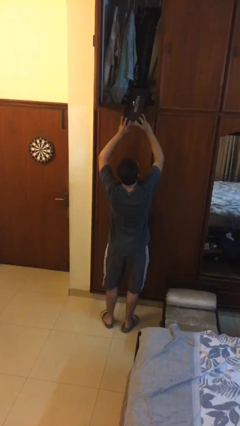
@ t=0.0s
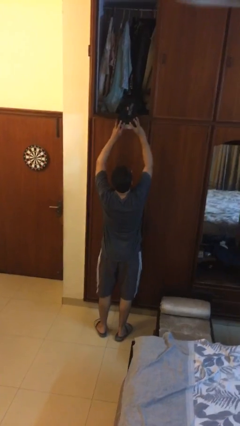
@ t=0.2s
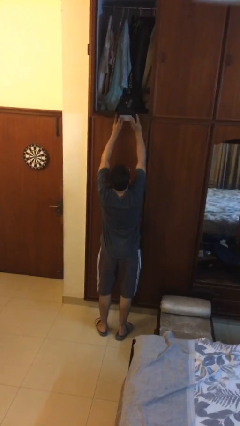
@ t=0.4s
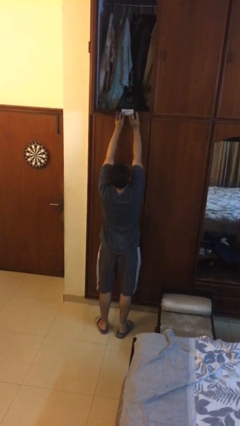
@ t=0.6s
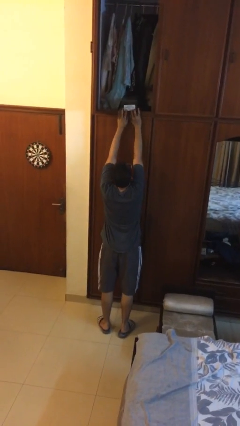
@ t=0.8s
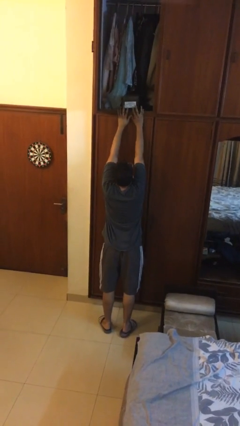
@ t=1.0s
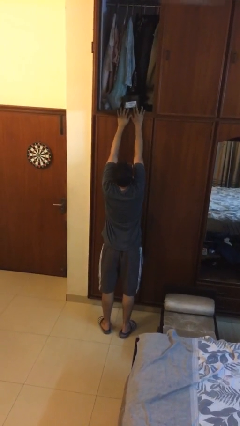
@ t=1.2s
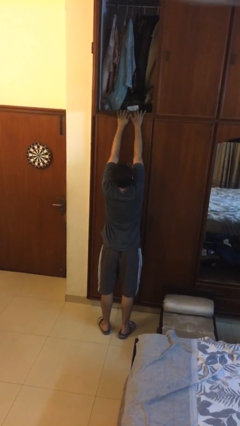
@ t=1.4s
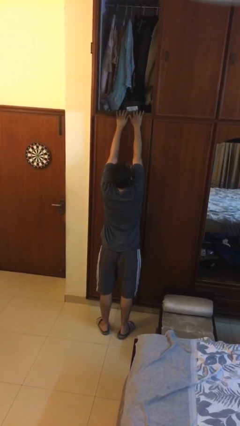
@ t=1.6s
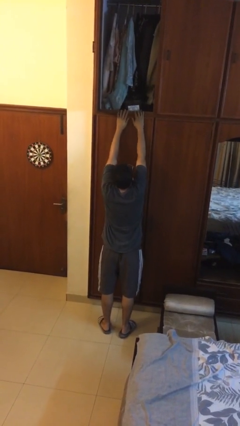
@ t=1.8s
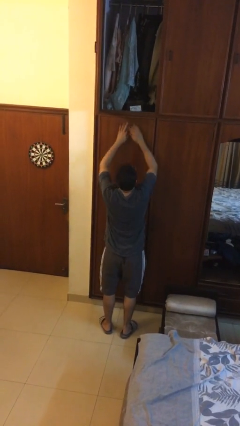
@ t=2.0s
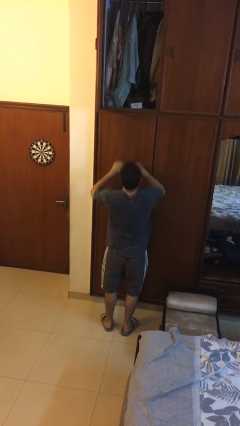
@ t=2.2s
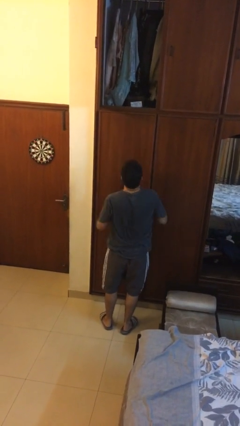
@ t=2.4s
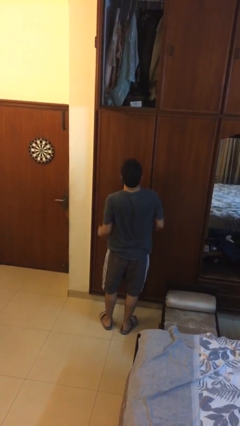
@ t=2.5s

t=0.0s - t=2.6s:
person puts down object on shelf

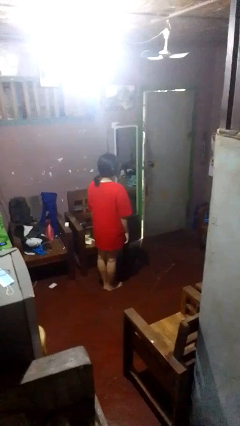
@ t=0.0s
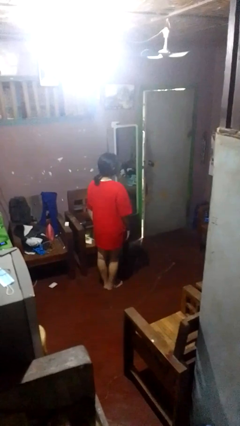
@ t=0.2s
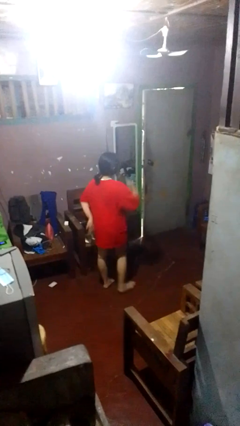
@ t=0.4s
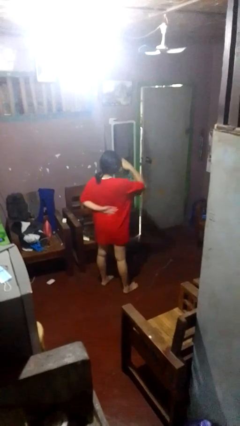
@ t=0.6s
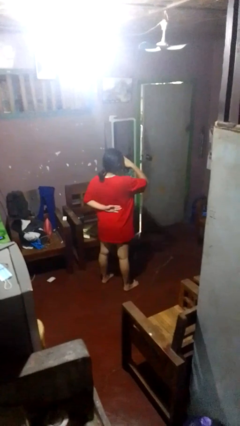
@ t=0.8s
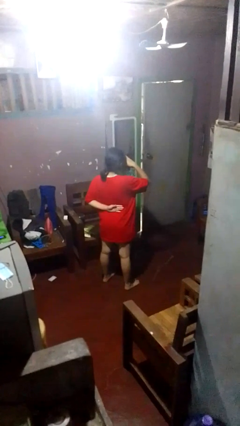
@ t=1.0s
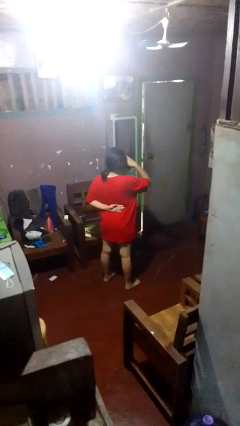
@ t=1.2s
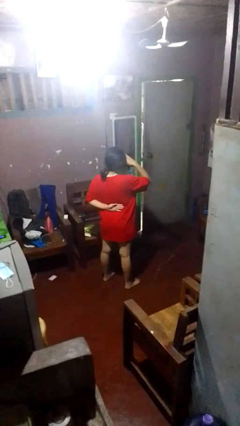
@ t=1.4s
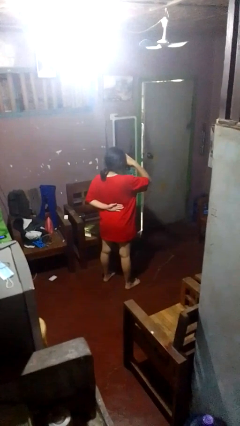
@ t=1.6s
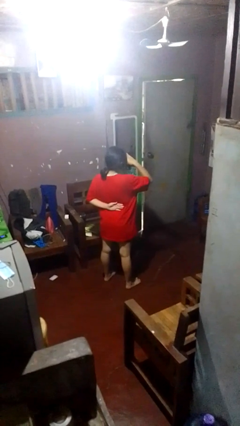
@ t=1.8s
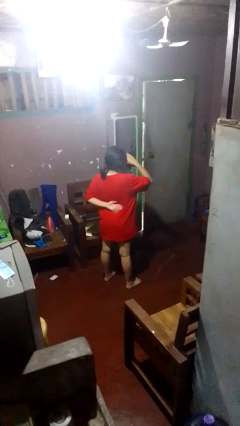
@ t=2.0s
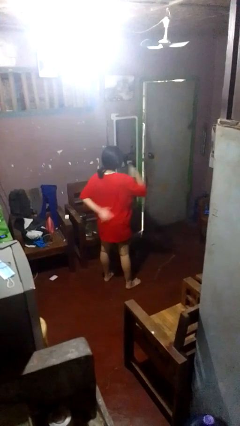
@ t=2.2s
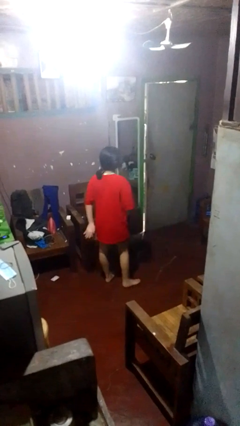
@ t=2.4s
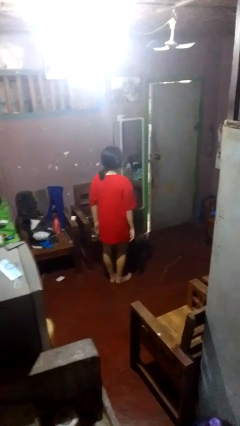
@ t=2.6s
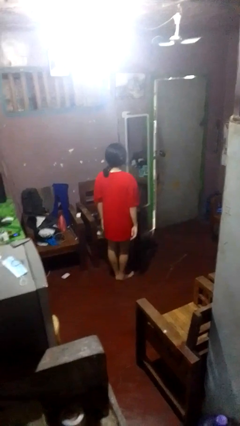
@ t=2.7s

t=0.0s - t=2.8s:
person salutes

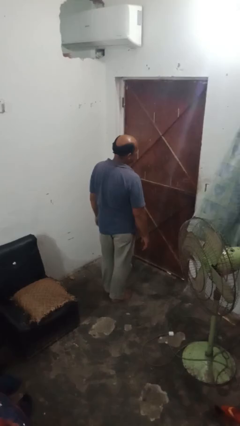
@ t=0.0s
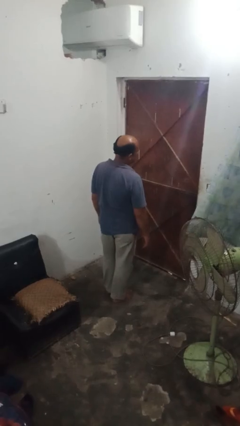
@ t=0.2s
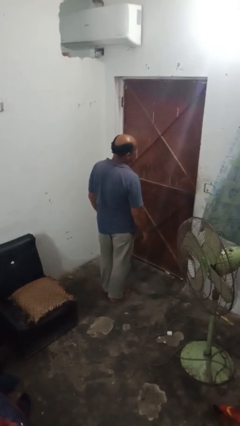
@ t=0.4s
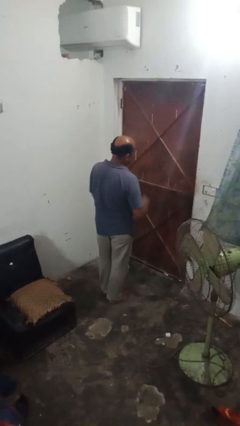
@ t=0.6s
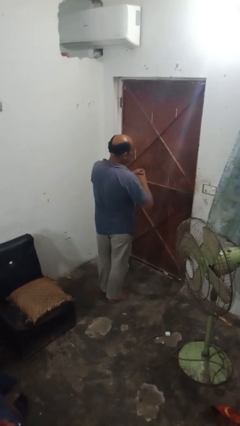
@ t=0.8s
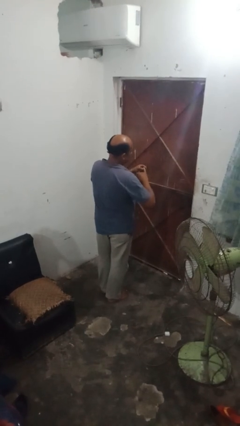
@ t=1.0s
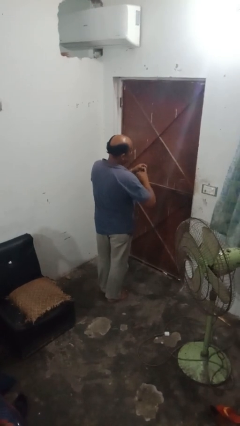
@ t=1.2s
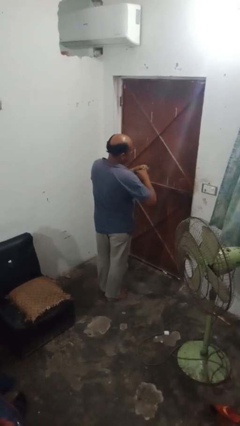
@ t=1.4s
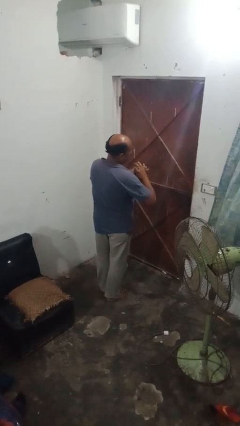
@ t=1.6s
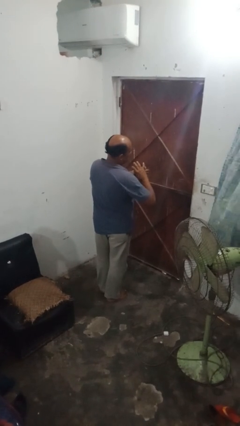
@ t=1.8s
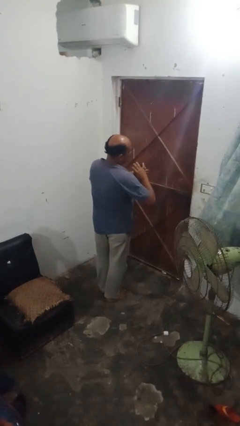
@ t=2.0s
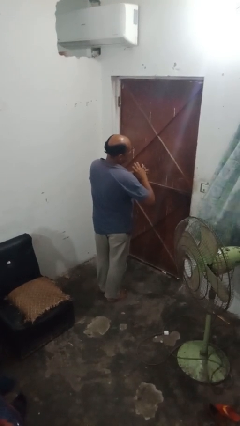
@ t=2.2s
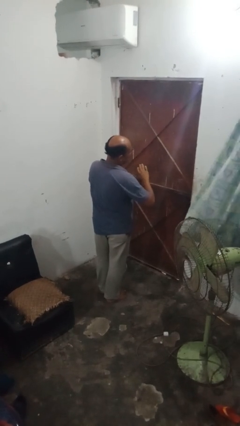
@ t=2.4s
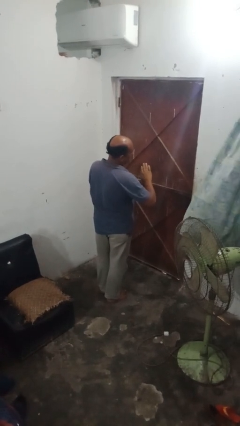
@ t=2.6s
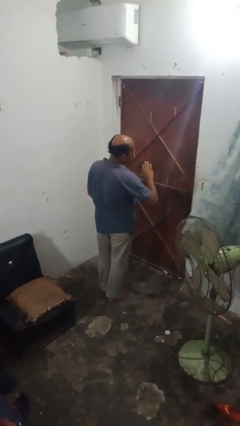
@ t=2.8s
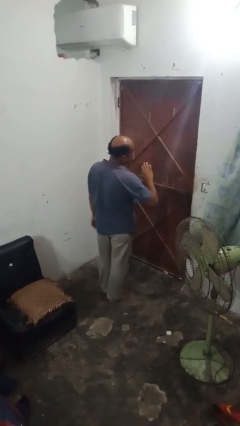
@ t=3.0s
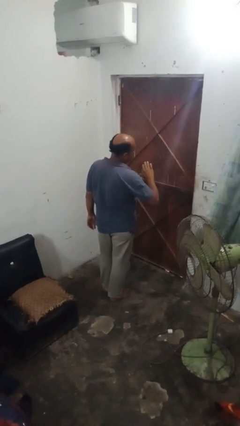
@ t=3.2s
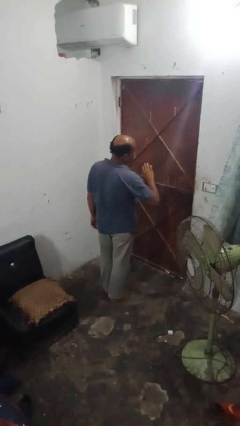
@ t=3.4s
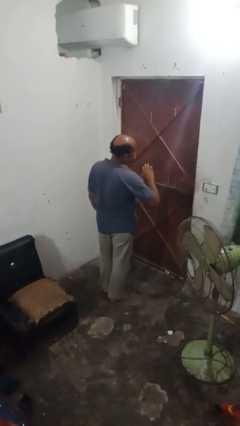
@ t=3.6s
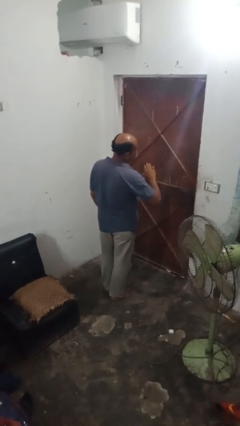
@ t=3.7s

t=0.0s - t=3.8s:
person puts on ring

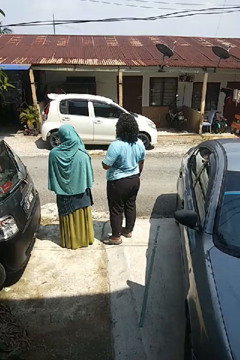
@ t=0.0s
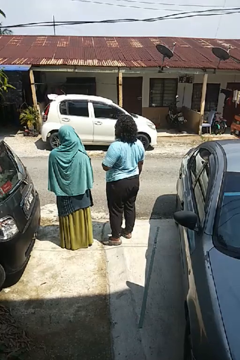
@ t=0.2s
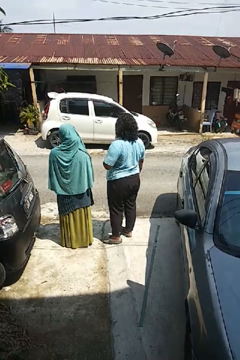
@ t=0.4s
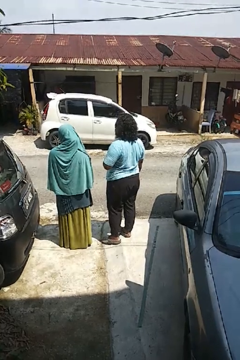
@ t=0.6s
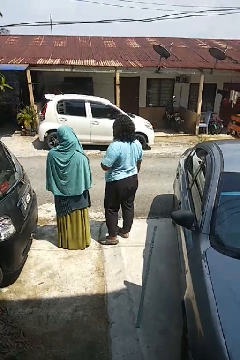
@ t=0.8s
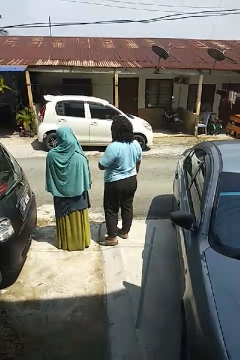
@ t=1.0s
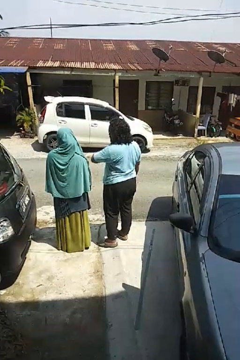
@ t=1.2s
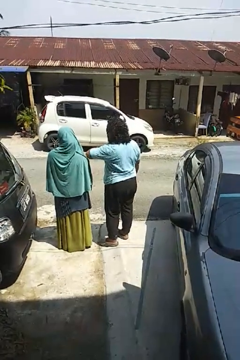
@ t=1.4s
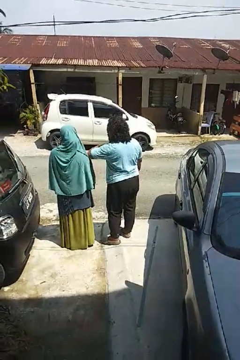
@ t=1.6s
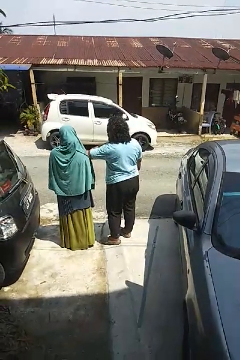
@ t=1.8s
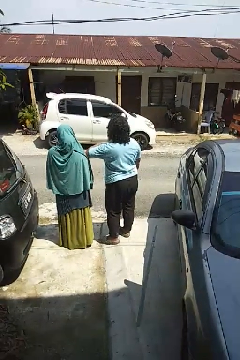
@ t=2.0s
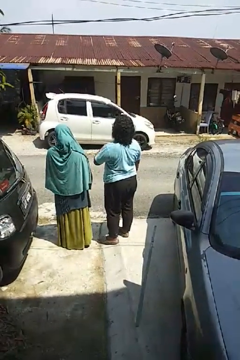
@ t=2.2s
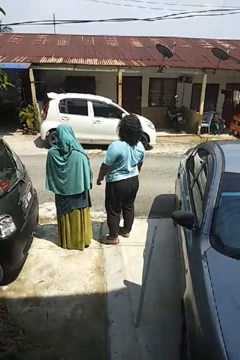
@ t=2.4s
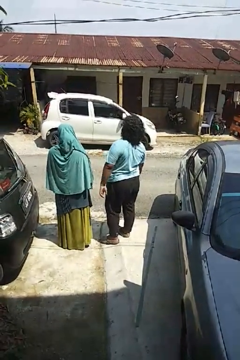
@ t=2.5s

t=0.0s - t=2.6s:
person nudges person with elbow

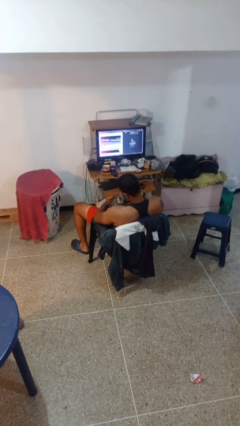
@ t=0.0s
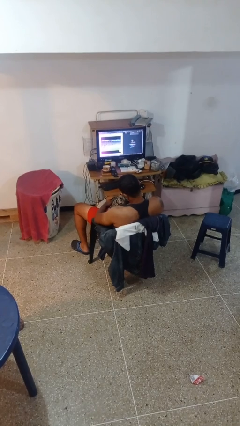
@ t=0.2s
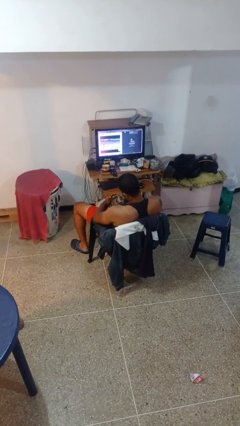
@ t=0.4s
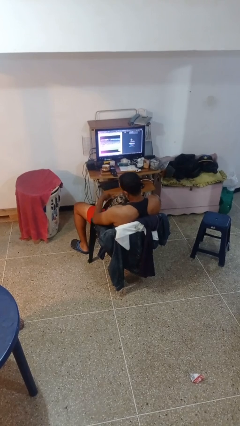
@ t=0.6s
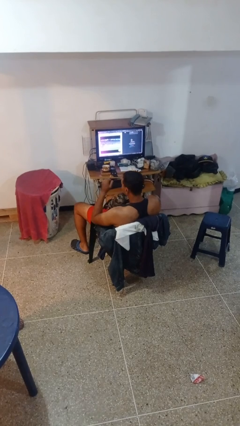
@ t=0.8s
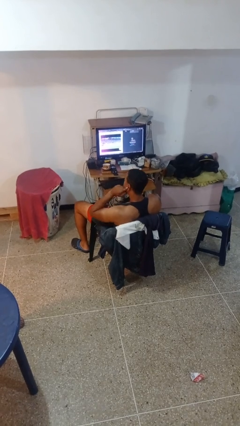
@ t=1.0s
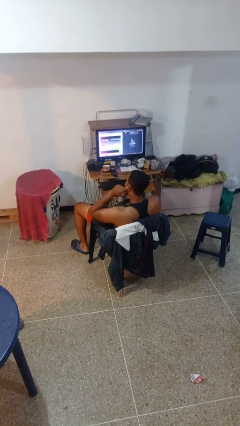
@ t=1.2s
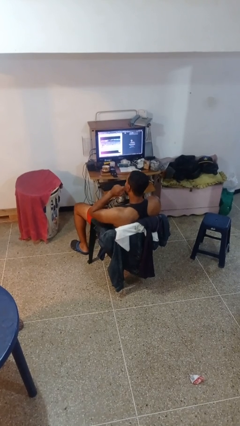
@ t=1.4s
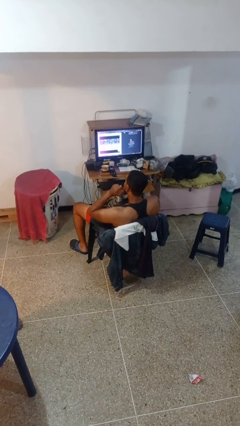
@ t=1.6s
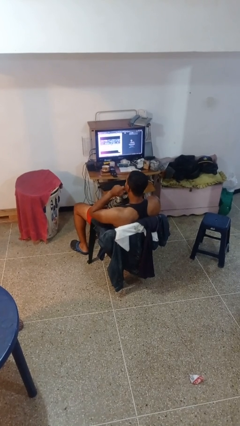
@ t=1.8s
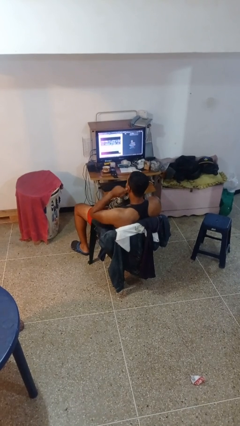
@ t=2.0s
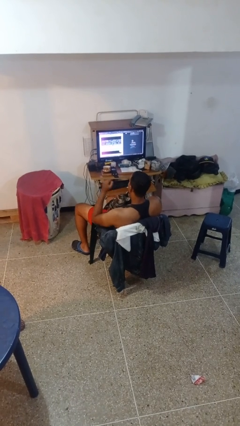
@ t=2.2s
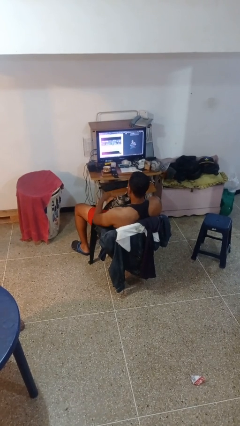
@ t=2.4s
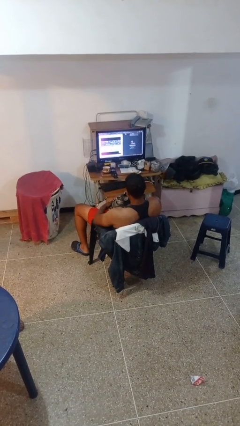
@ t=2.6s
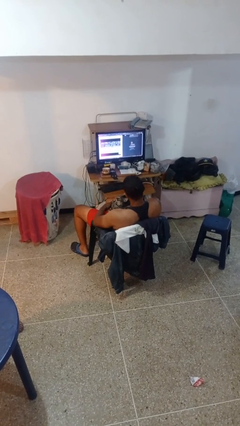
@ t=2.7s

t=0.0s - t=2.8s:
person gestures listen closely

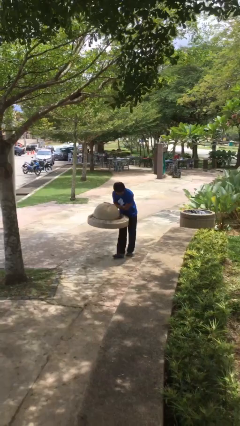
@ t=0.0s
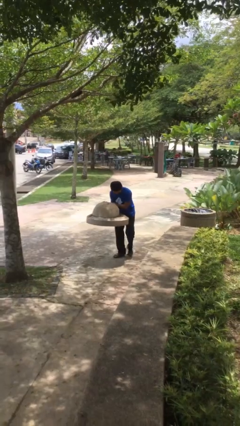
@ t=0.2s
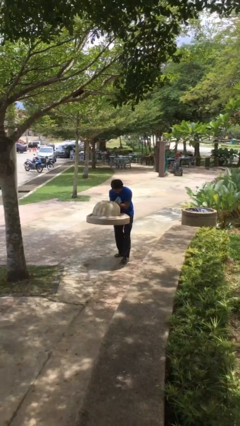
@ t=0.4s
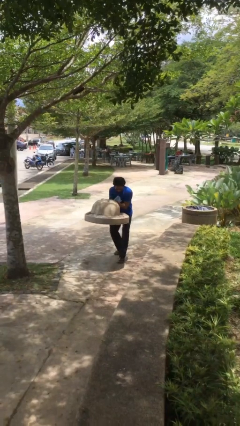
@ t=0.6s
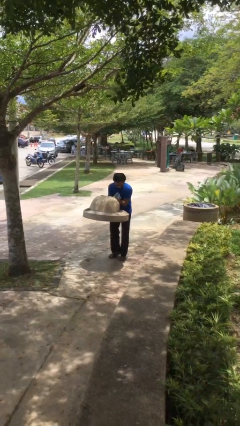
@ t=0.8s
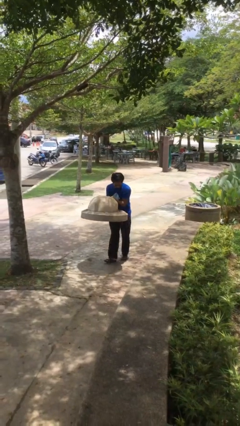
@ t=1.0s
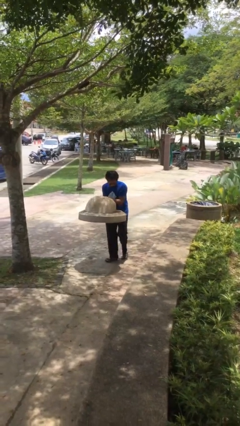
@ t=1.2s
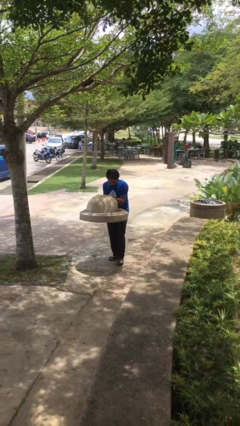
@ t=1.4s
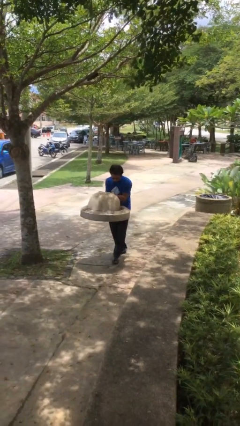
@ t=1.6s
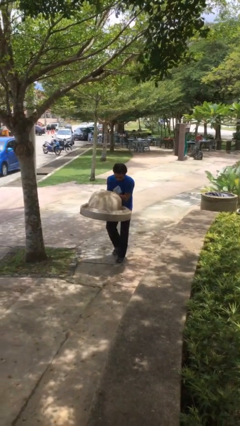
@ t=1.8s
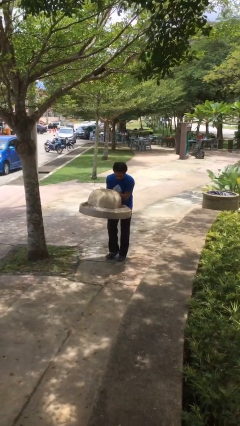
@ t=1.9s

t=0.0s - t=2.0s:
person carries heavy object

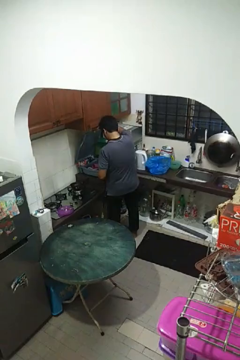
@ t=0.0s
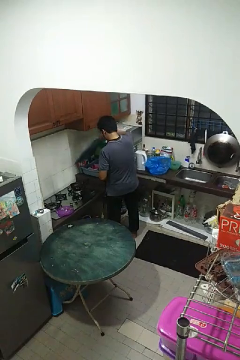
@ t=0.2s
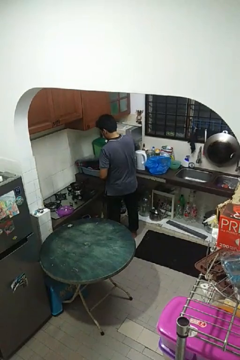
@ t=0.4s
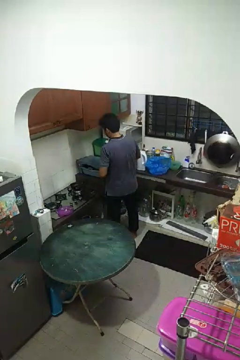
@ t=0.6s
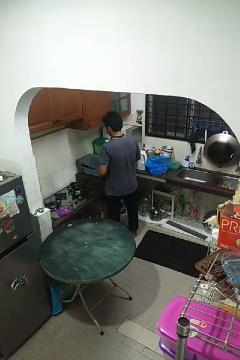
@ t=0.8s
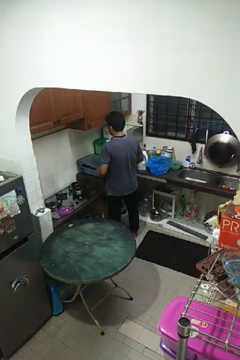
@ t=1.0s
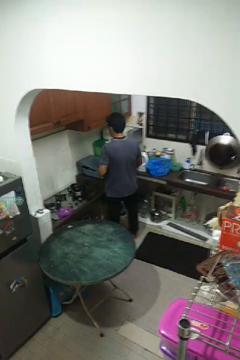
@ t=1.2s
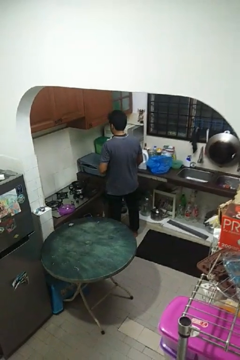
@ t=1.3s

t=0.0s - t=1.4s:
person closes dishwasher
